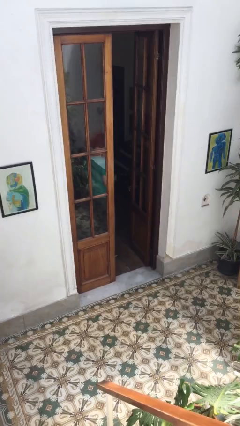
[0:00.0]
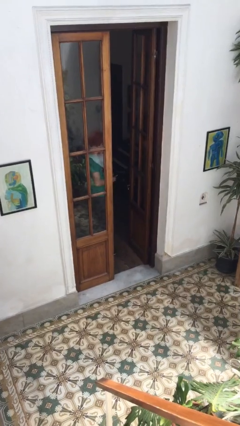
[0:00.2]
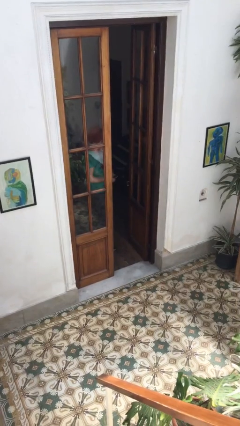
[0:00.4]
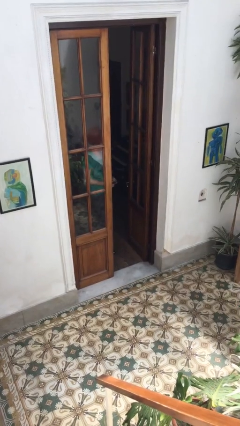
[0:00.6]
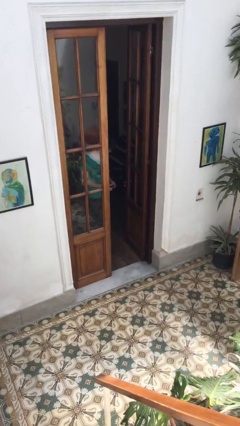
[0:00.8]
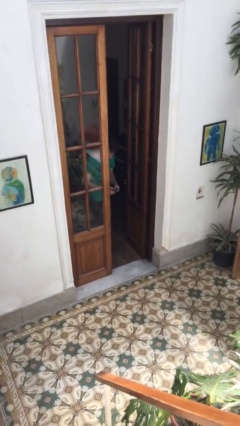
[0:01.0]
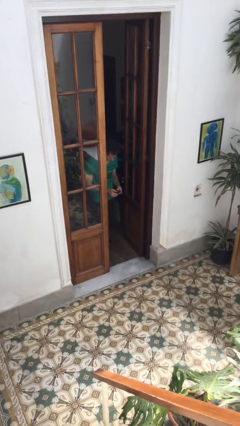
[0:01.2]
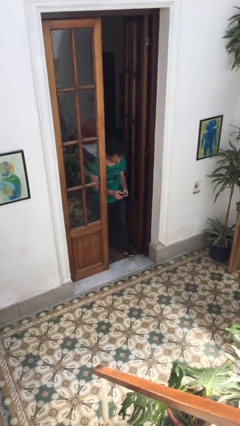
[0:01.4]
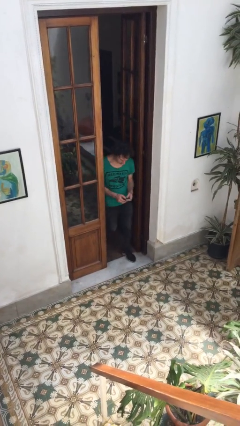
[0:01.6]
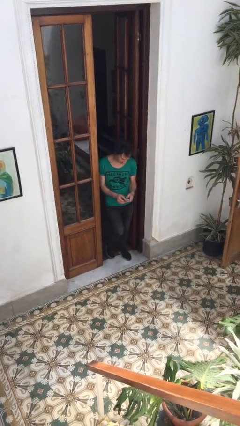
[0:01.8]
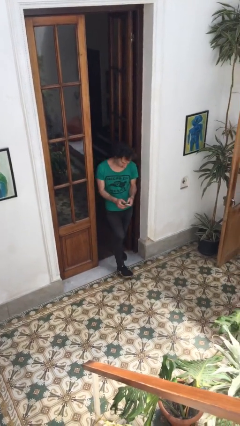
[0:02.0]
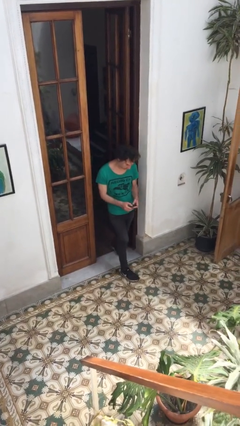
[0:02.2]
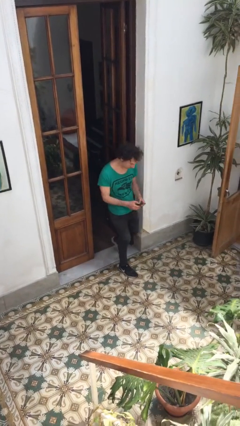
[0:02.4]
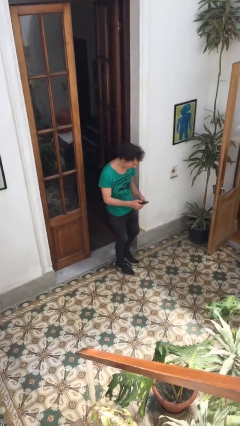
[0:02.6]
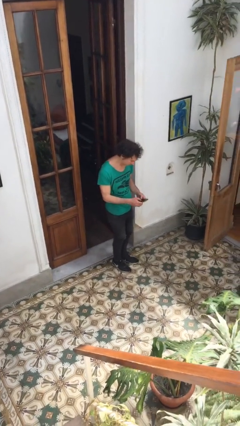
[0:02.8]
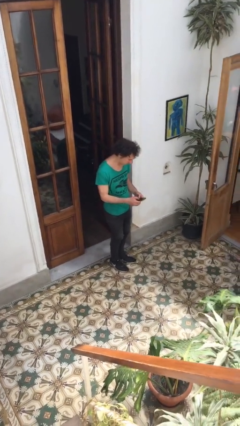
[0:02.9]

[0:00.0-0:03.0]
person enters scene through structure

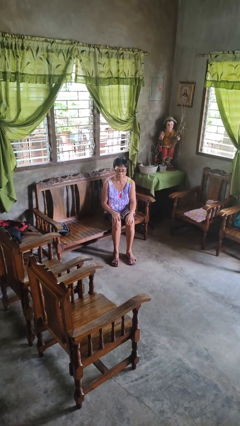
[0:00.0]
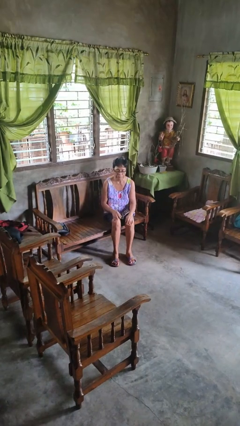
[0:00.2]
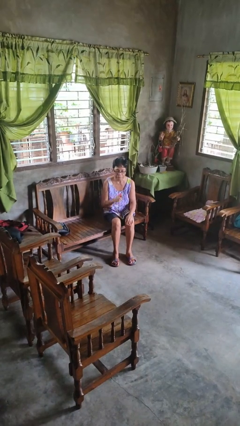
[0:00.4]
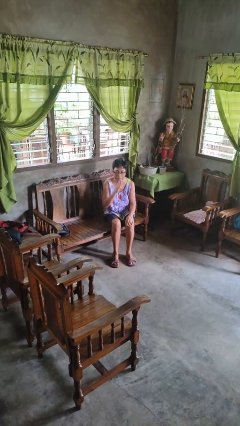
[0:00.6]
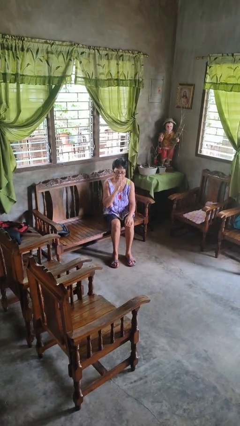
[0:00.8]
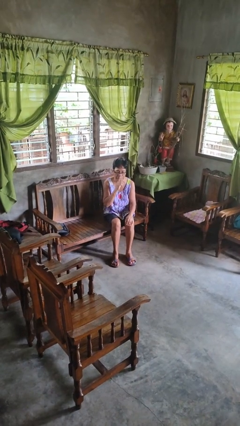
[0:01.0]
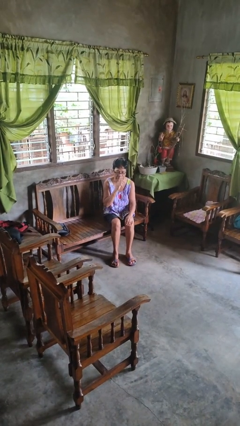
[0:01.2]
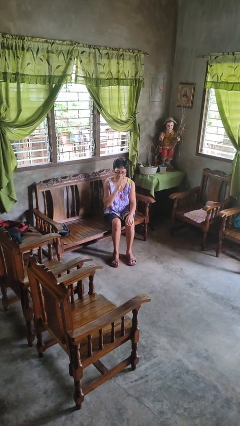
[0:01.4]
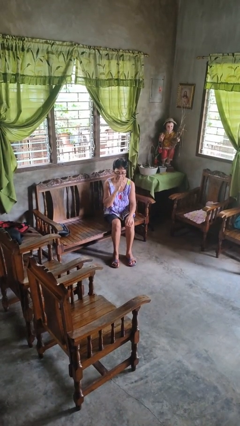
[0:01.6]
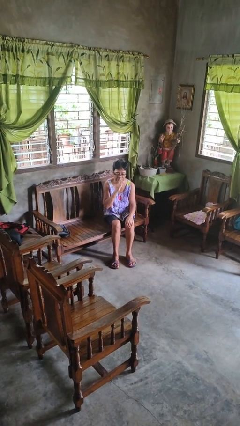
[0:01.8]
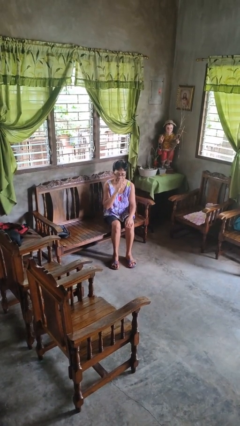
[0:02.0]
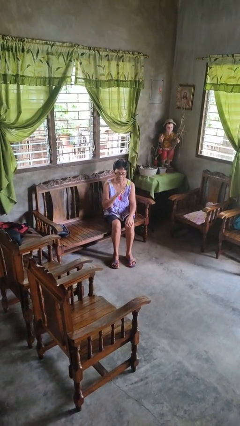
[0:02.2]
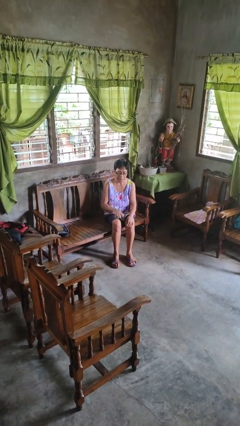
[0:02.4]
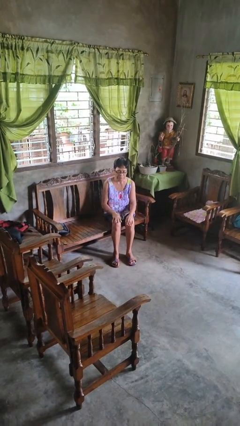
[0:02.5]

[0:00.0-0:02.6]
person gestures be quiet

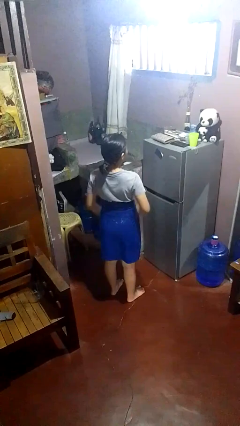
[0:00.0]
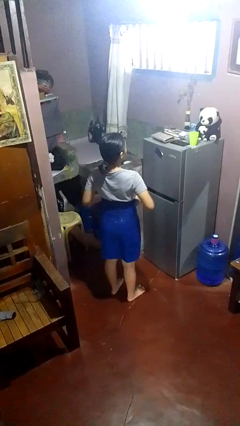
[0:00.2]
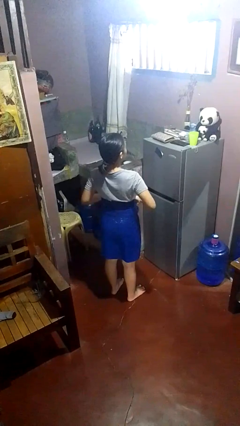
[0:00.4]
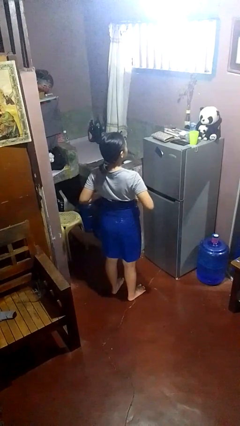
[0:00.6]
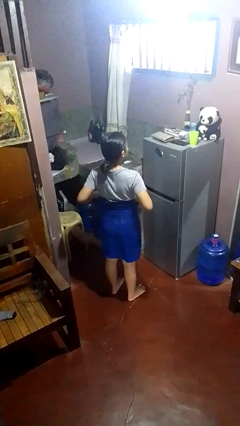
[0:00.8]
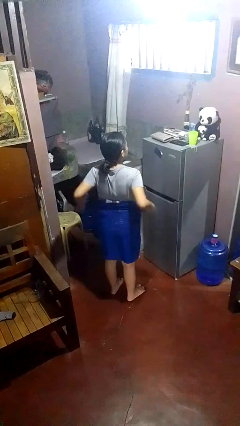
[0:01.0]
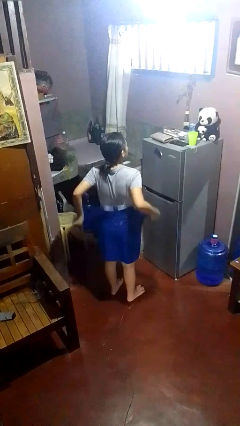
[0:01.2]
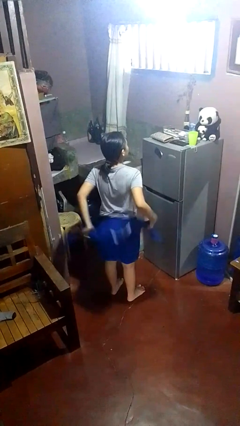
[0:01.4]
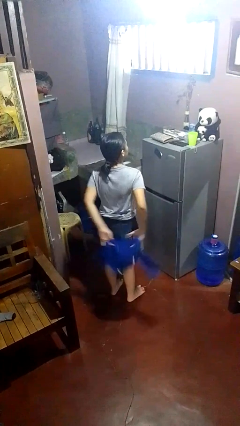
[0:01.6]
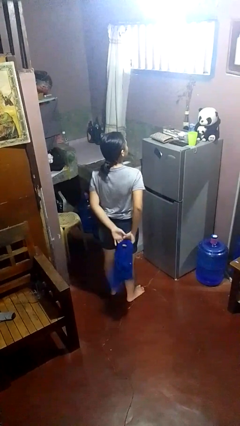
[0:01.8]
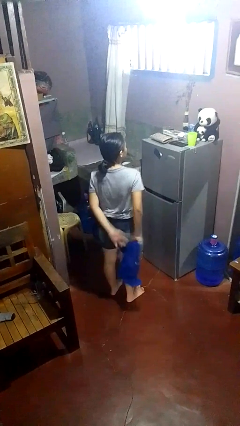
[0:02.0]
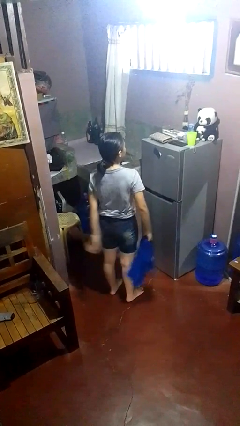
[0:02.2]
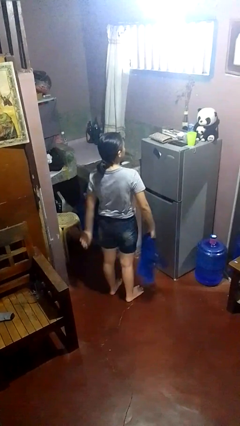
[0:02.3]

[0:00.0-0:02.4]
person unties jacket around waist

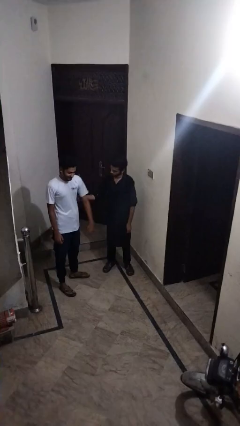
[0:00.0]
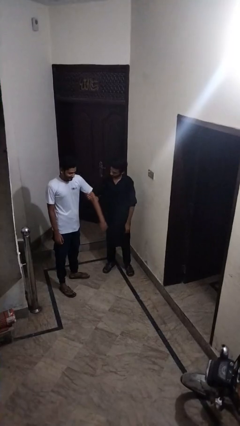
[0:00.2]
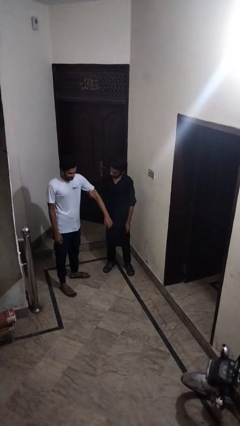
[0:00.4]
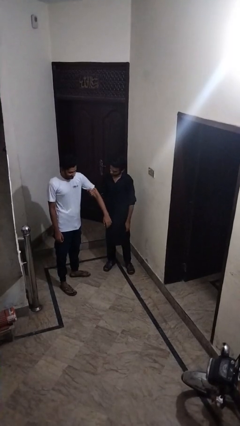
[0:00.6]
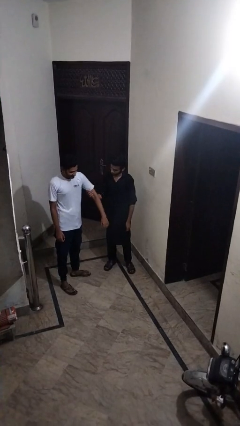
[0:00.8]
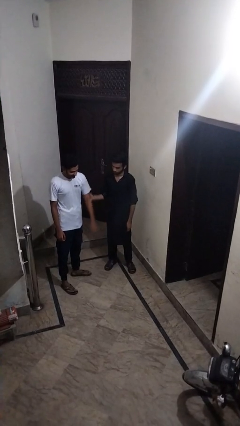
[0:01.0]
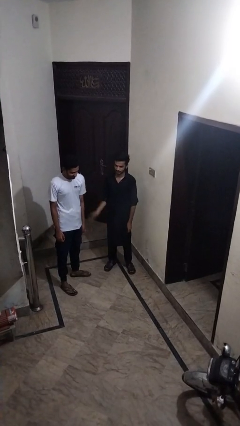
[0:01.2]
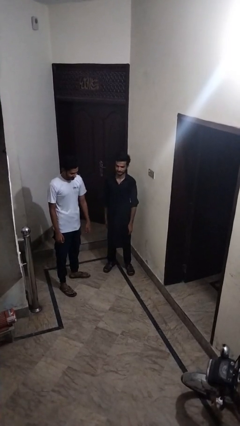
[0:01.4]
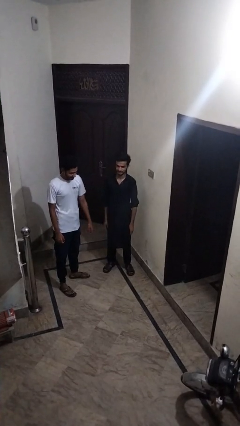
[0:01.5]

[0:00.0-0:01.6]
person grabs person by bicep

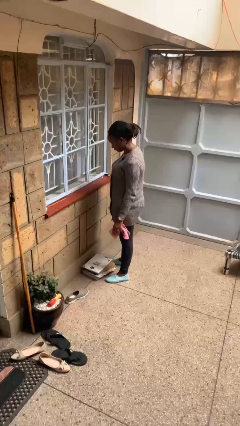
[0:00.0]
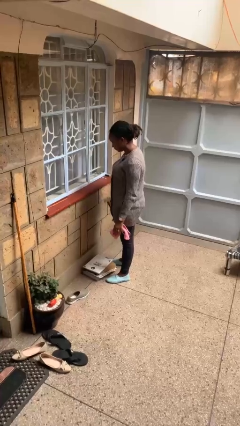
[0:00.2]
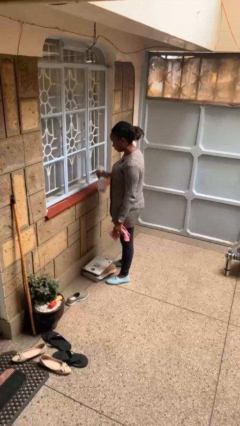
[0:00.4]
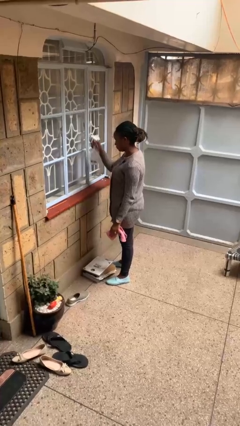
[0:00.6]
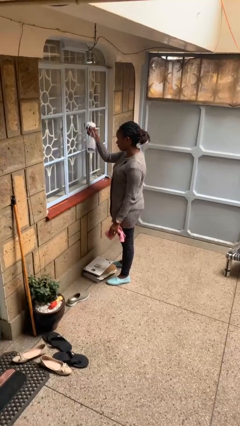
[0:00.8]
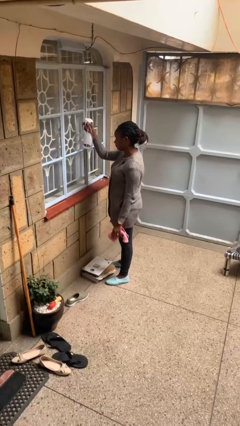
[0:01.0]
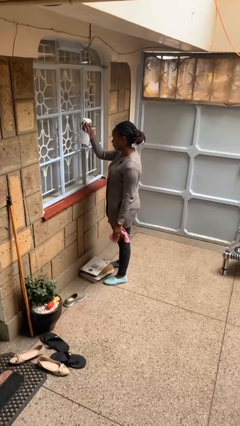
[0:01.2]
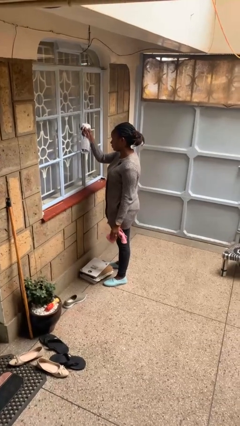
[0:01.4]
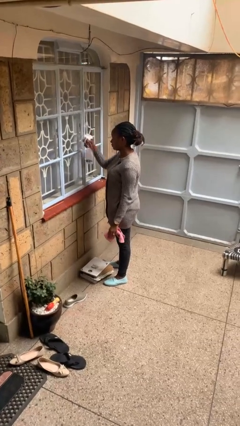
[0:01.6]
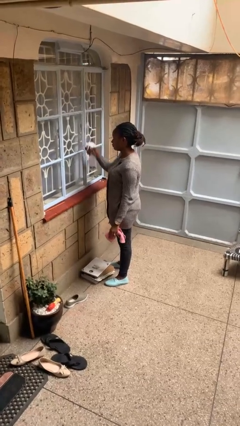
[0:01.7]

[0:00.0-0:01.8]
person sprays from bottle

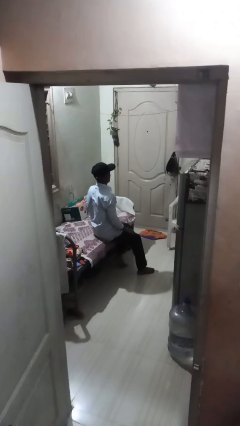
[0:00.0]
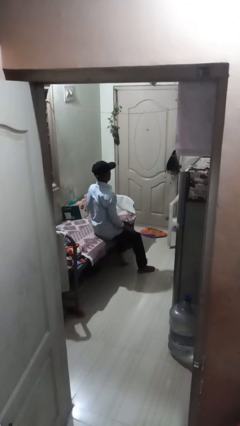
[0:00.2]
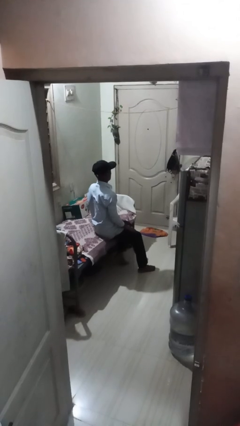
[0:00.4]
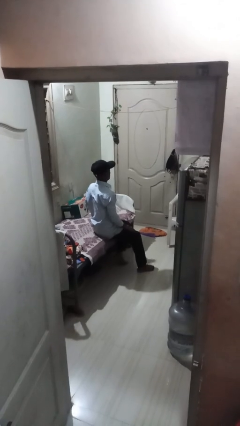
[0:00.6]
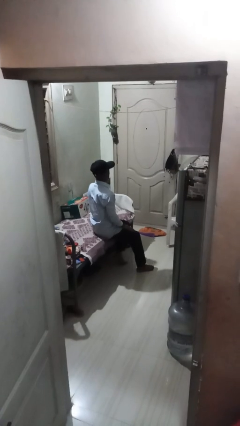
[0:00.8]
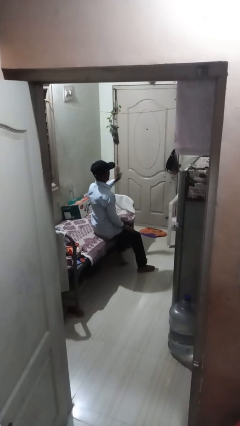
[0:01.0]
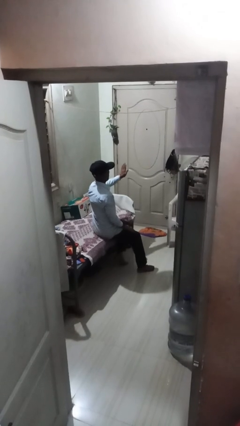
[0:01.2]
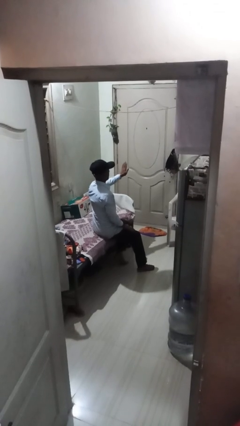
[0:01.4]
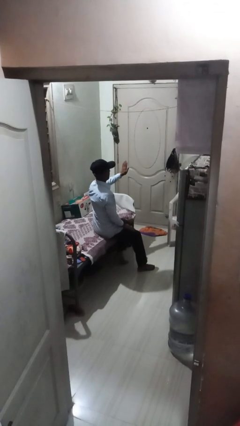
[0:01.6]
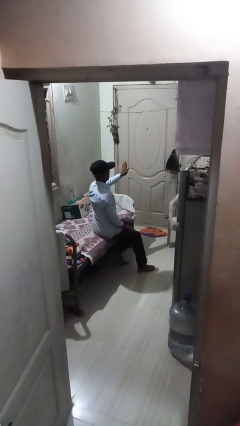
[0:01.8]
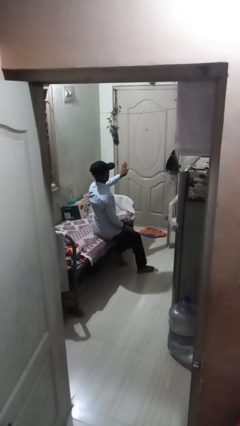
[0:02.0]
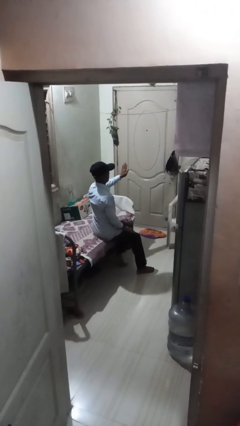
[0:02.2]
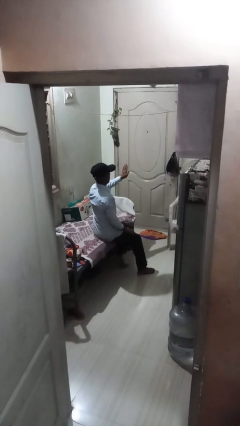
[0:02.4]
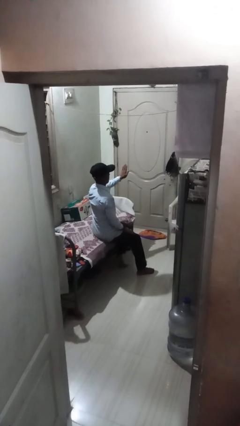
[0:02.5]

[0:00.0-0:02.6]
person gestures stop

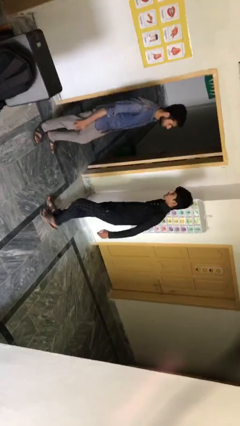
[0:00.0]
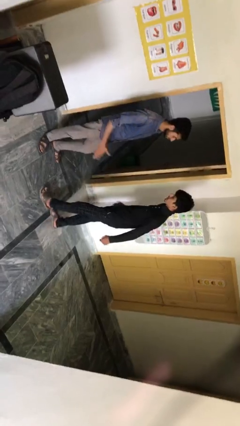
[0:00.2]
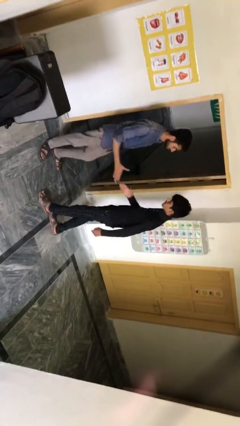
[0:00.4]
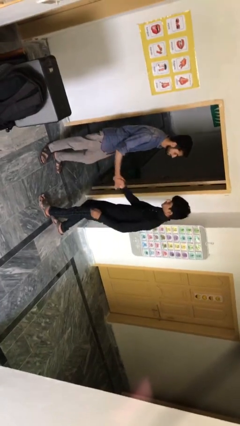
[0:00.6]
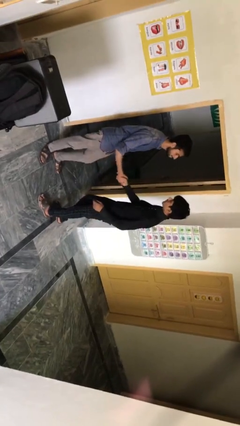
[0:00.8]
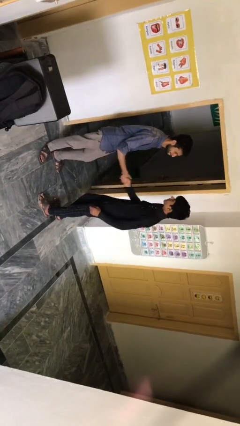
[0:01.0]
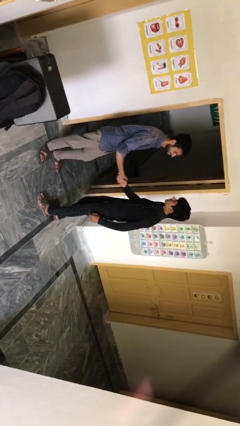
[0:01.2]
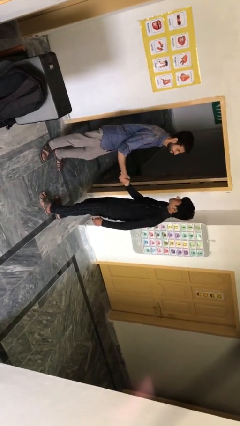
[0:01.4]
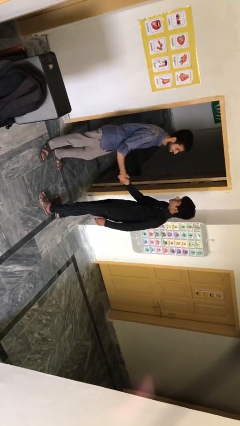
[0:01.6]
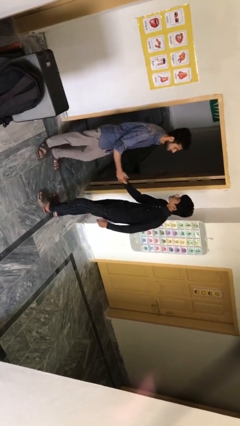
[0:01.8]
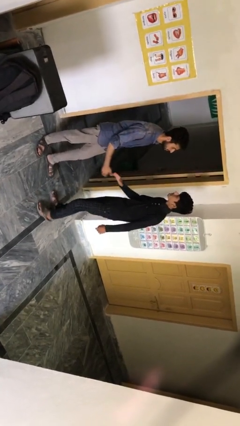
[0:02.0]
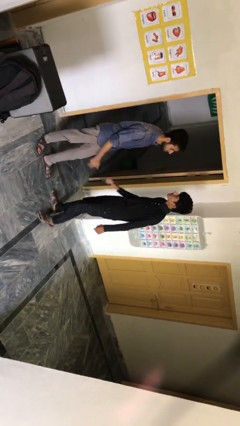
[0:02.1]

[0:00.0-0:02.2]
person shakes hand

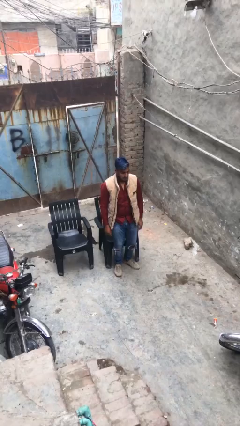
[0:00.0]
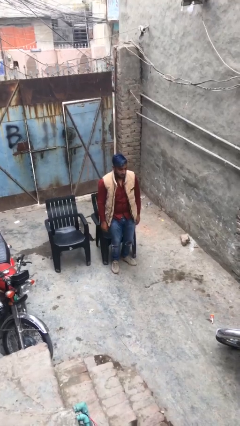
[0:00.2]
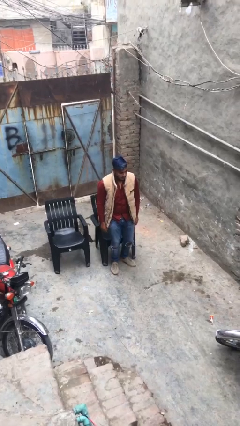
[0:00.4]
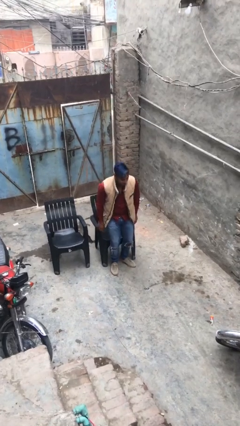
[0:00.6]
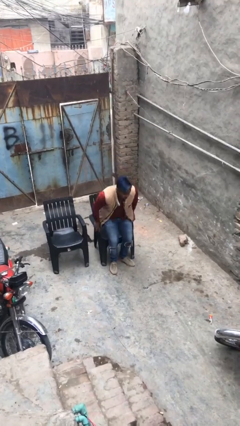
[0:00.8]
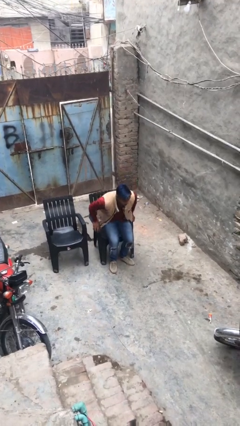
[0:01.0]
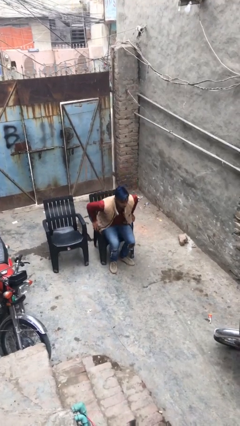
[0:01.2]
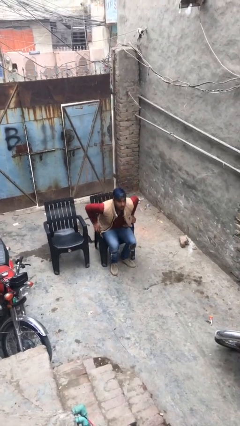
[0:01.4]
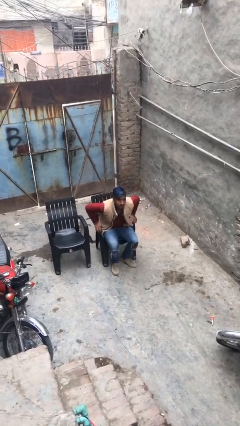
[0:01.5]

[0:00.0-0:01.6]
person sits down
